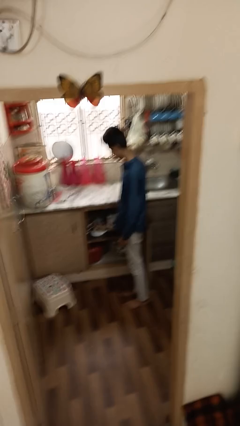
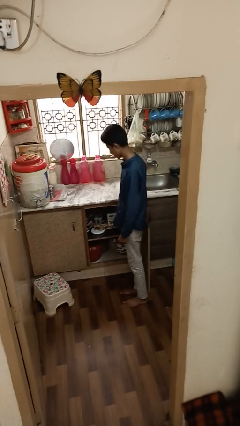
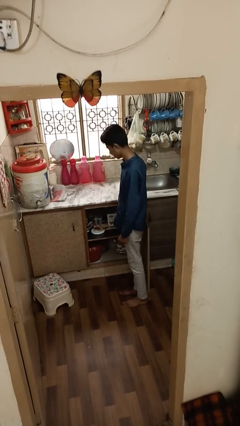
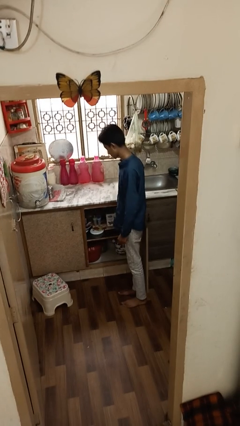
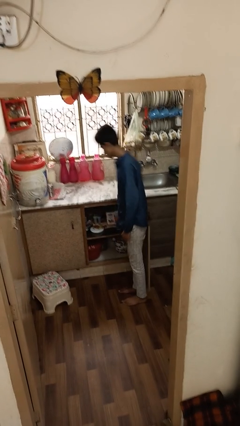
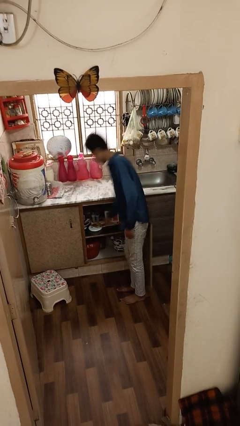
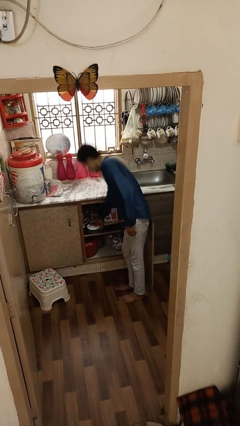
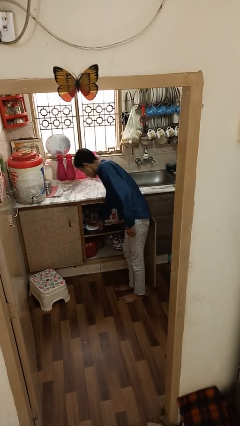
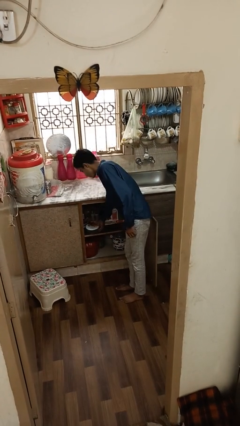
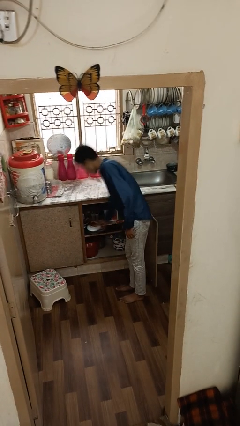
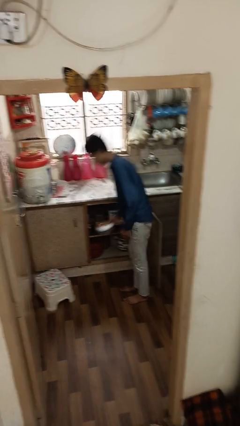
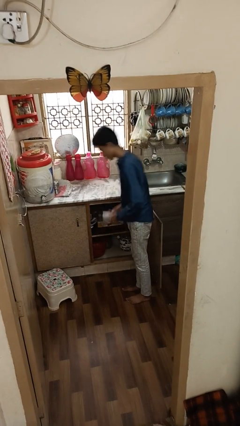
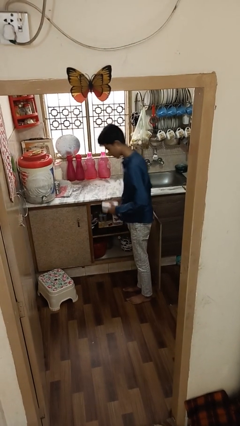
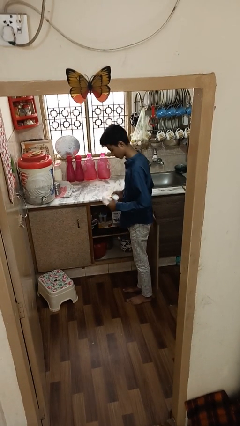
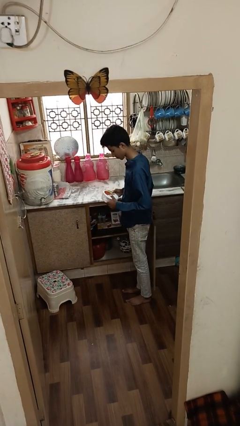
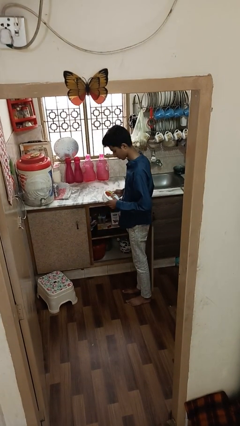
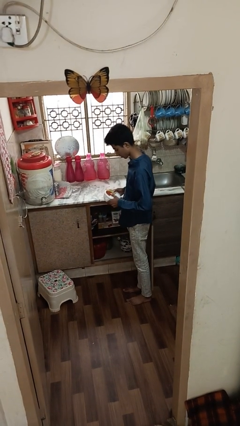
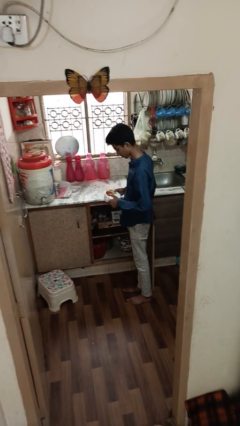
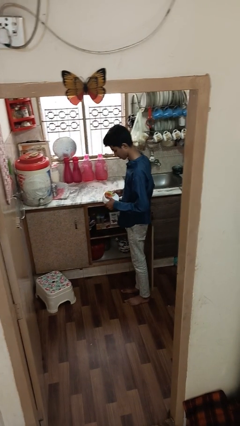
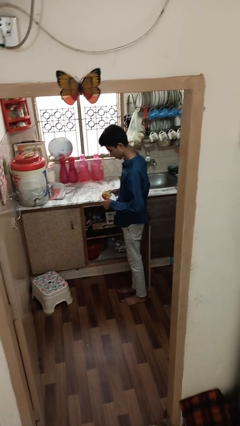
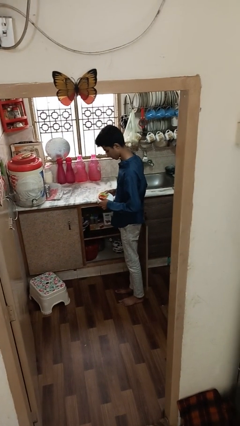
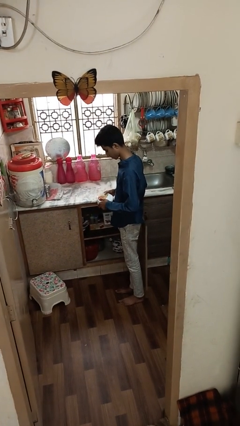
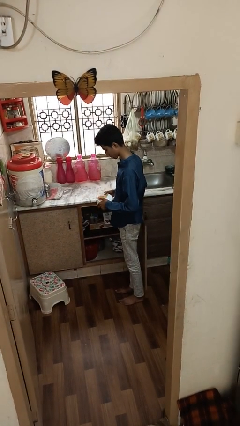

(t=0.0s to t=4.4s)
person picks up object from cabinet

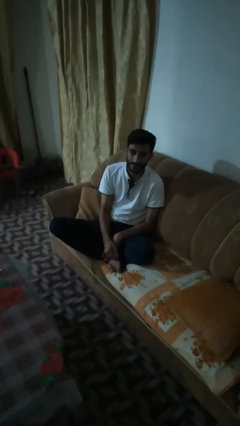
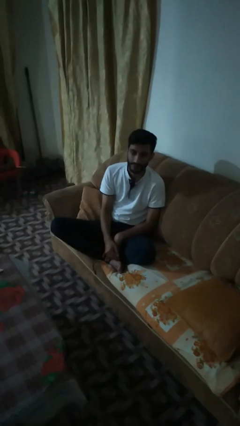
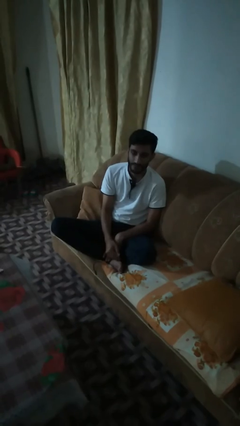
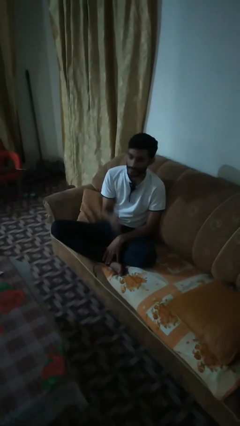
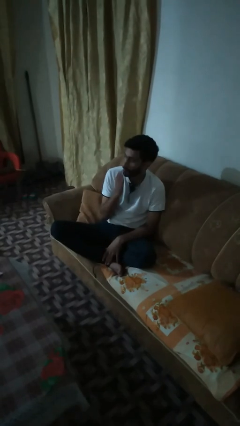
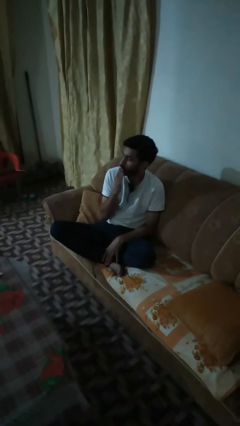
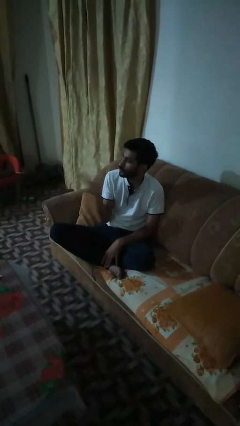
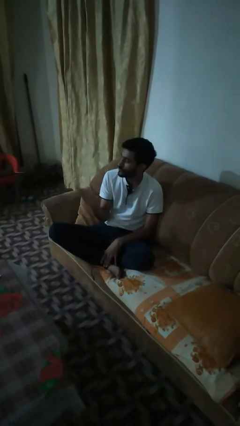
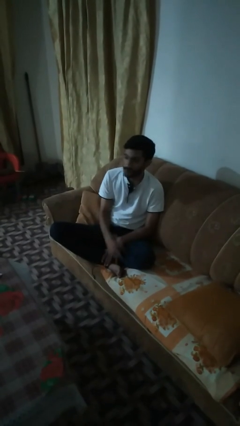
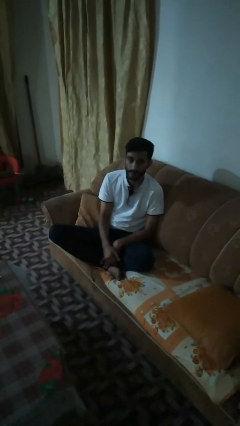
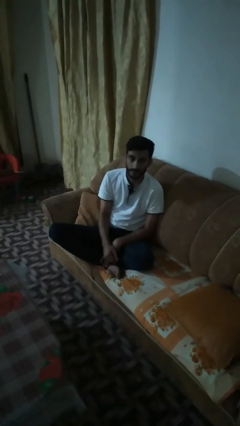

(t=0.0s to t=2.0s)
person gestures blow kiss

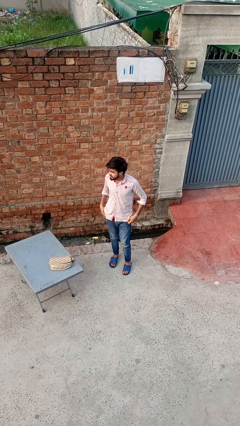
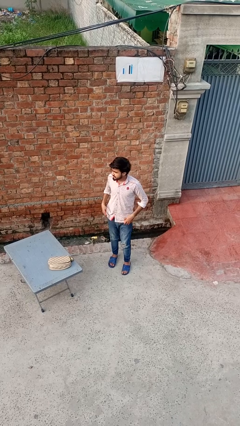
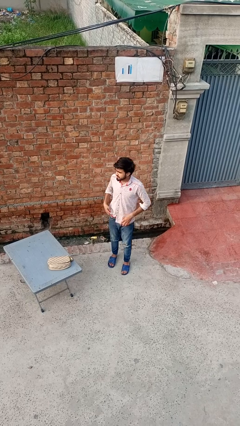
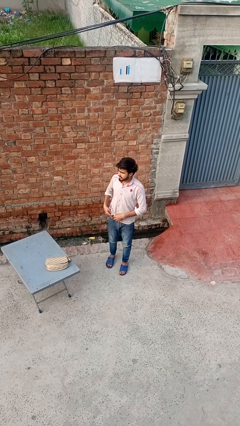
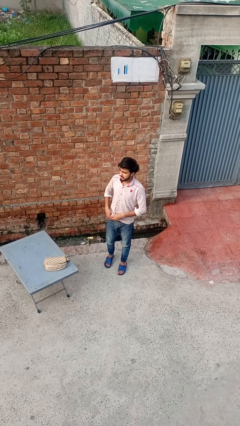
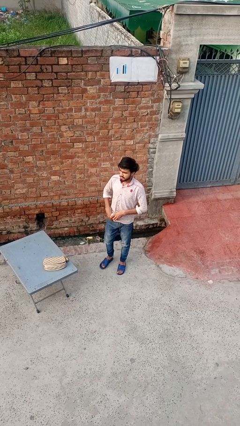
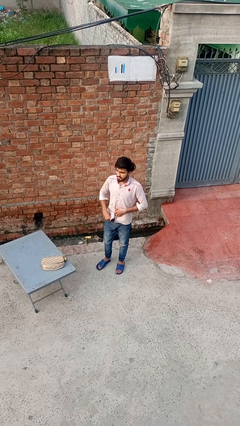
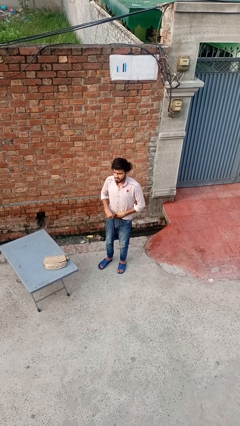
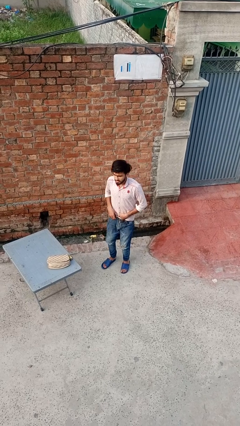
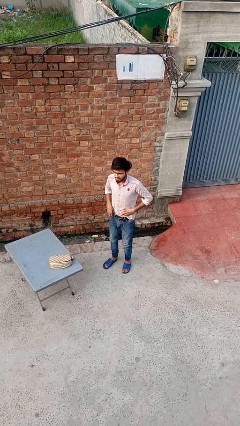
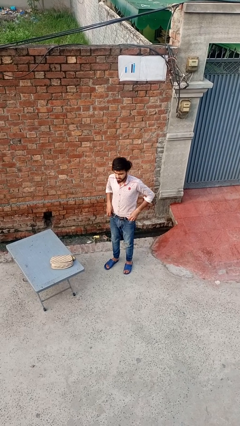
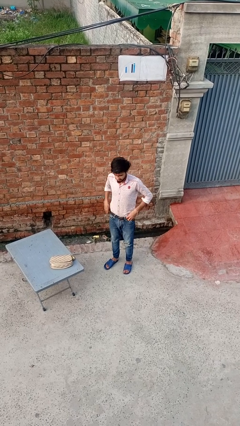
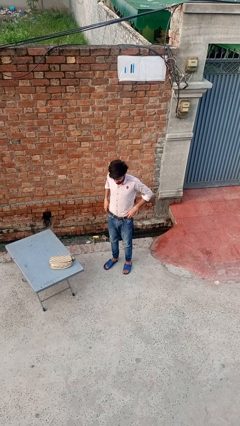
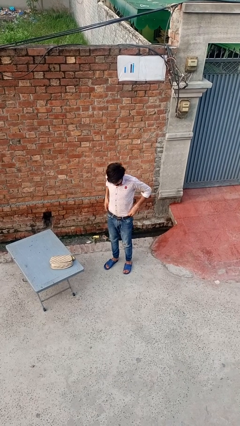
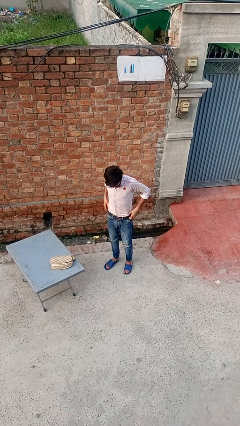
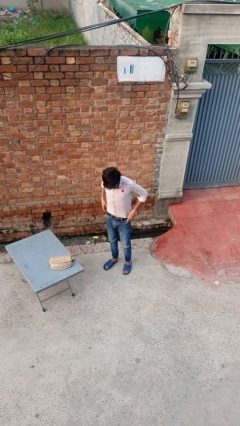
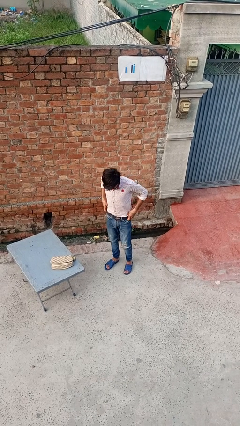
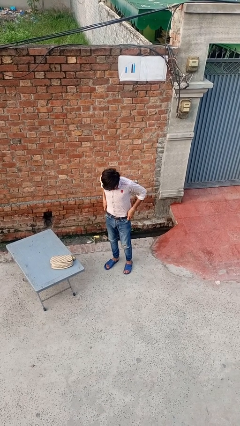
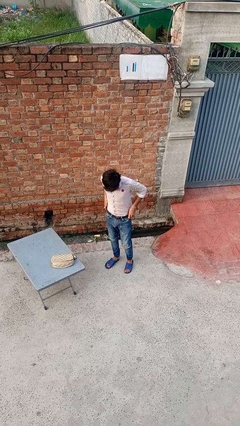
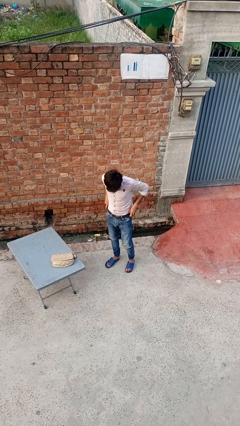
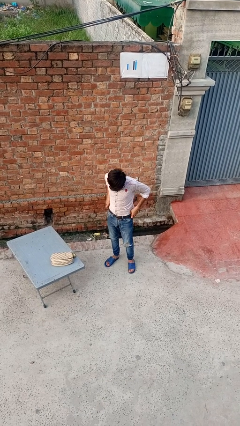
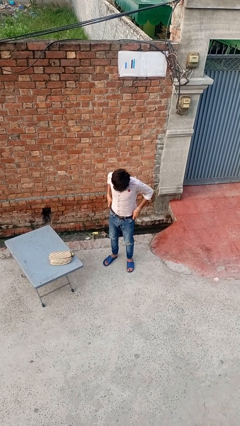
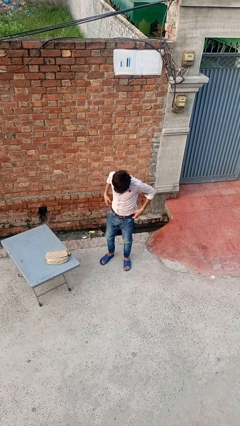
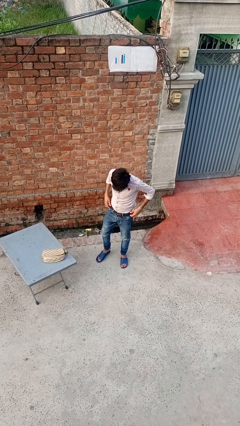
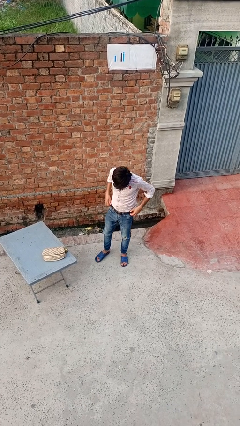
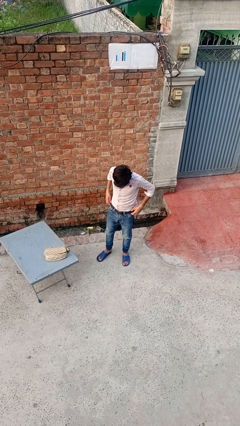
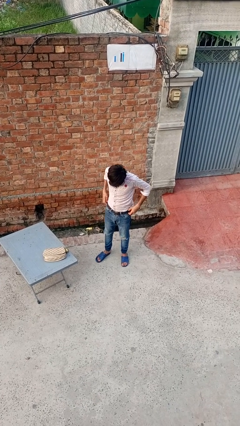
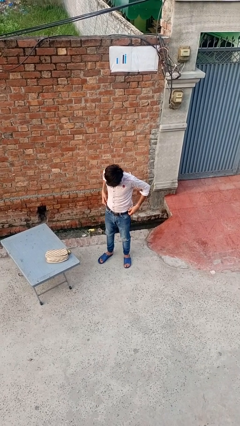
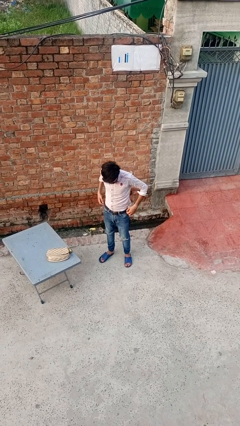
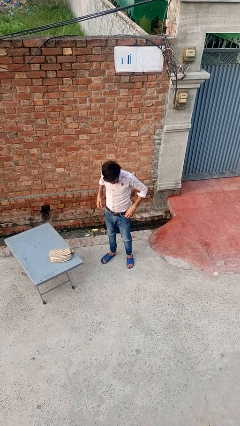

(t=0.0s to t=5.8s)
person tucks in shirt

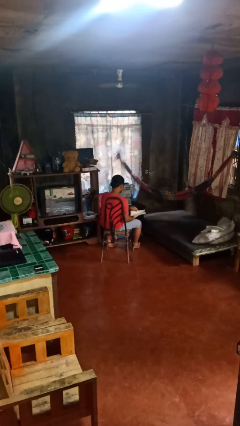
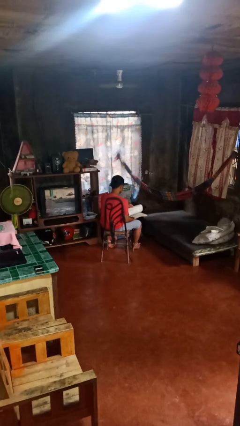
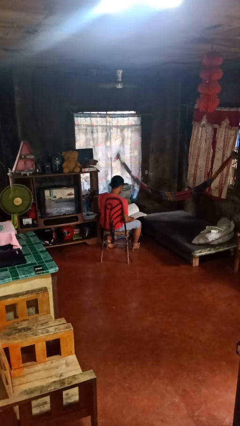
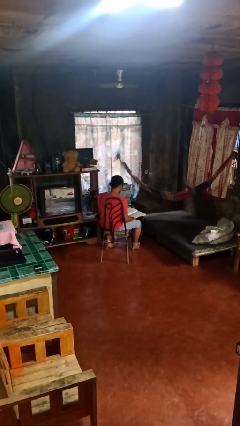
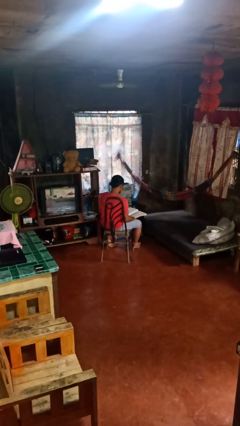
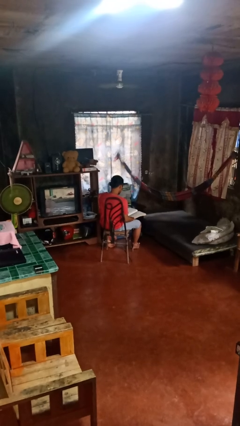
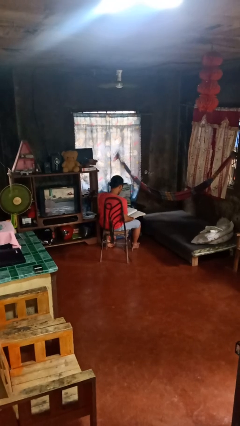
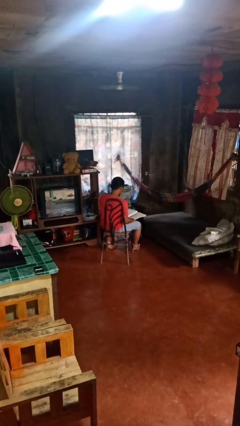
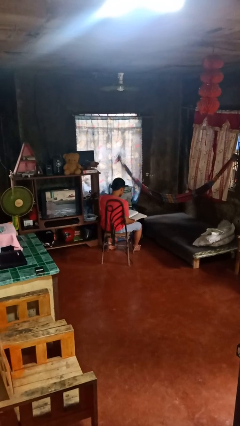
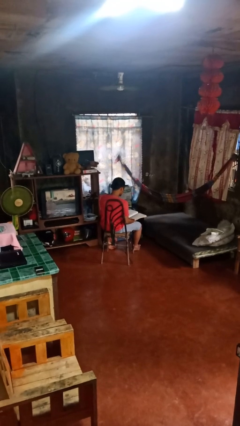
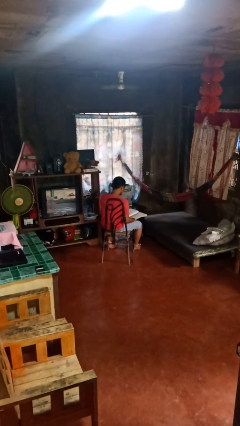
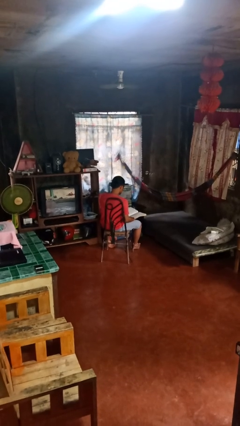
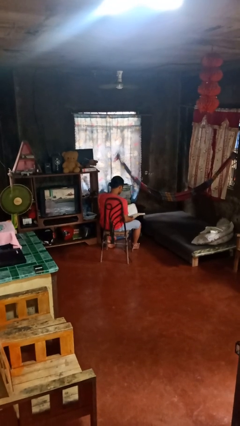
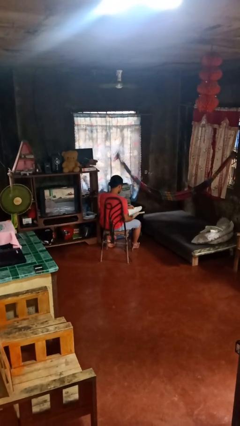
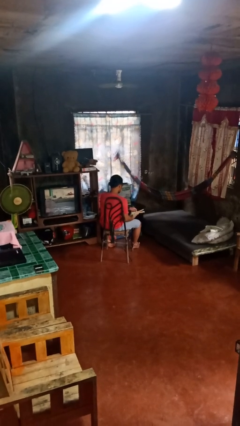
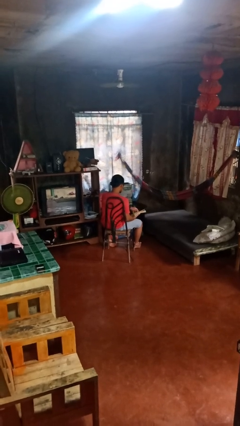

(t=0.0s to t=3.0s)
person reads book

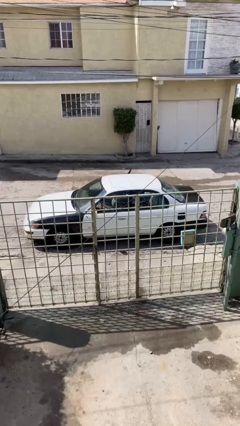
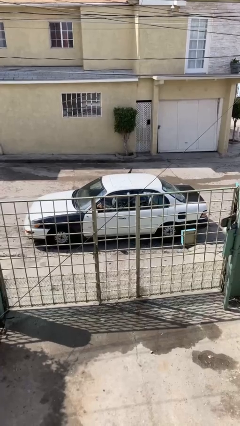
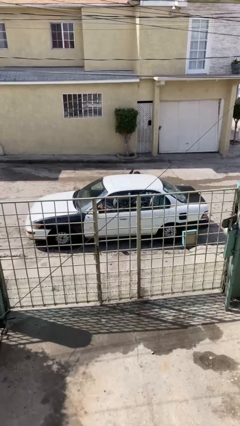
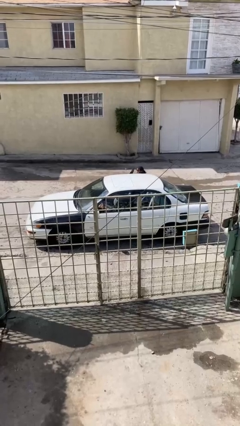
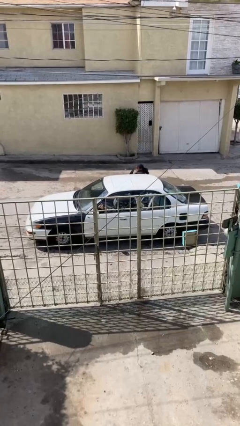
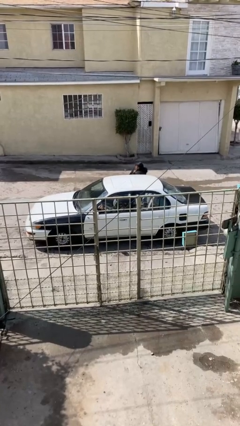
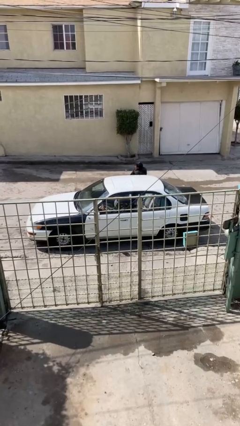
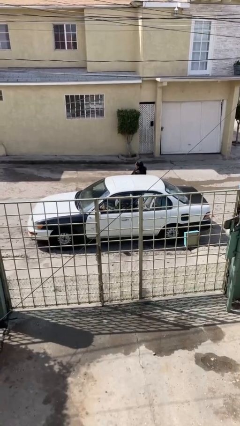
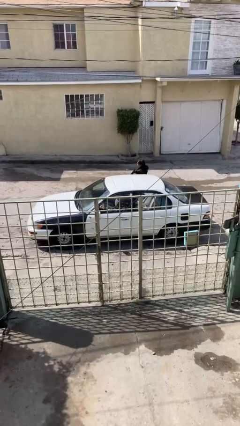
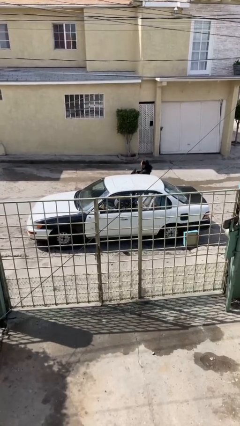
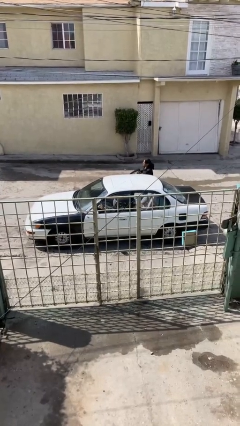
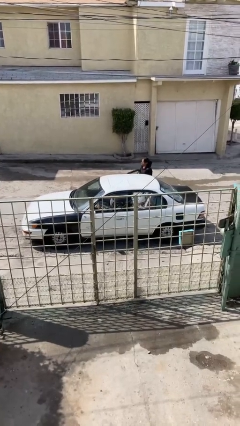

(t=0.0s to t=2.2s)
car drops off person
